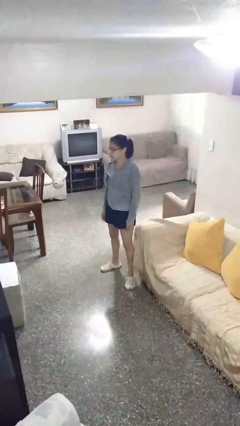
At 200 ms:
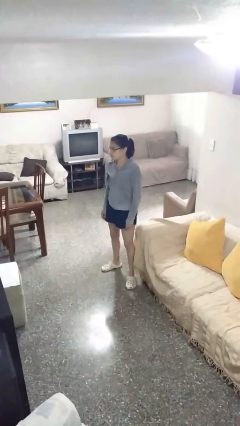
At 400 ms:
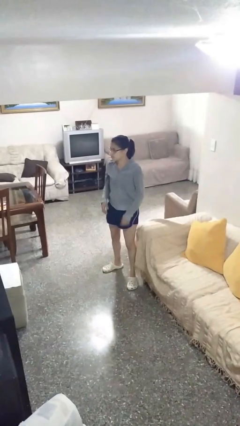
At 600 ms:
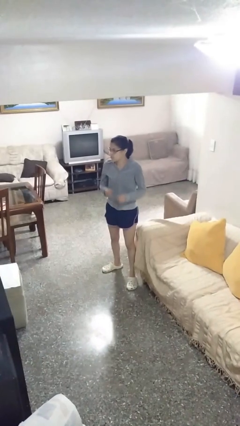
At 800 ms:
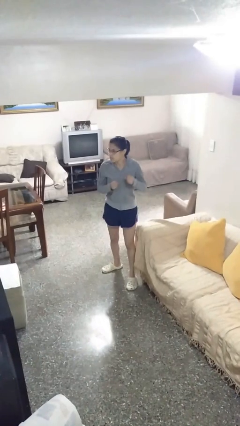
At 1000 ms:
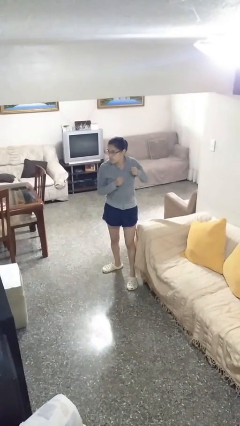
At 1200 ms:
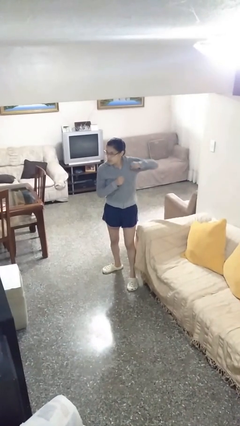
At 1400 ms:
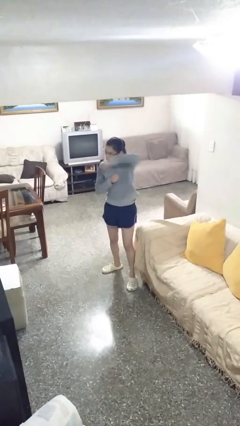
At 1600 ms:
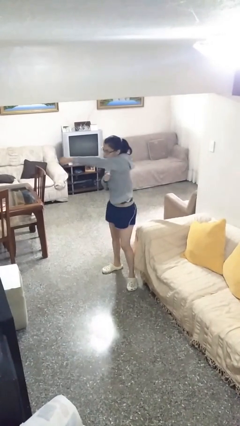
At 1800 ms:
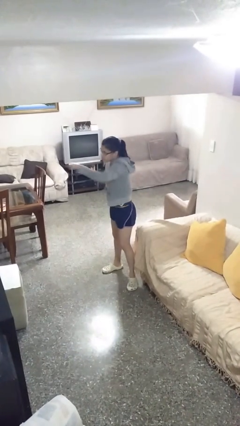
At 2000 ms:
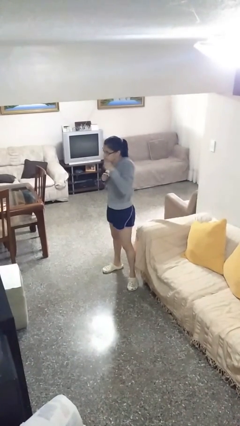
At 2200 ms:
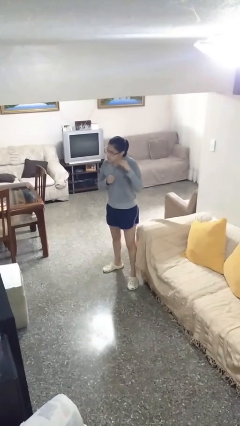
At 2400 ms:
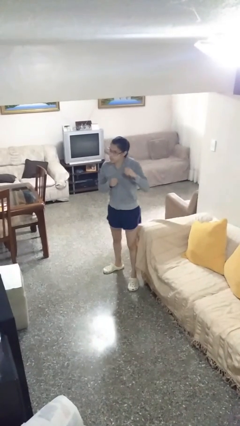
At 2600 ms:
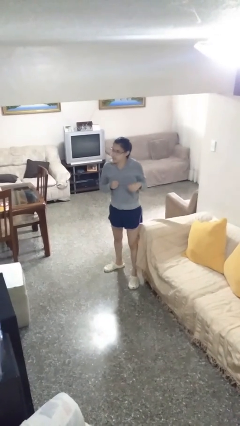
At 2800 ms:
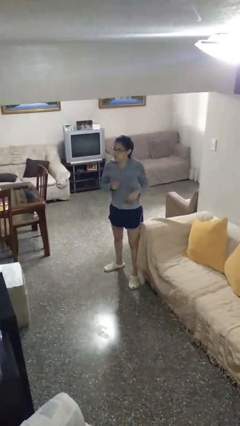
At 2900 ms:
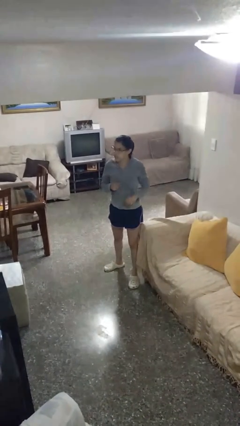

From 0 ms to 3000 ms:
person punches

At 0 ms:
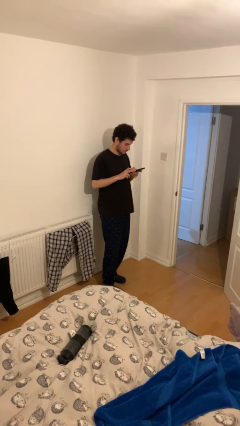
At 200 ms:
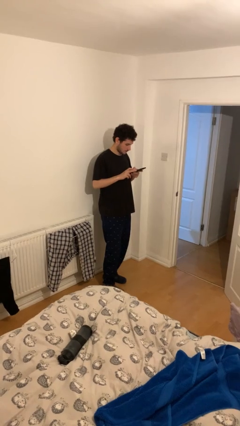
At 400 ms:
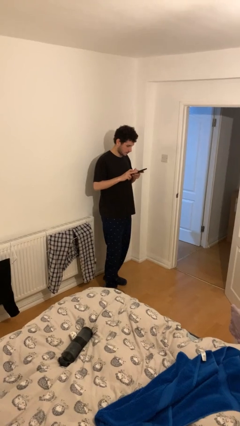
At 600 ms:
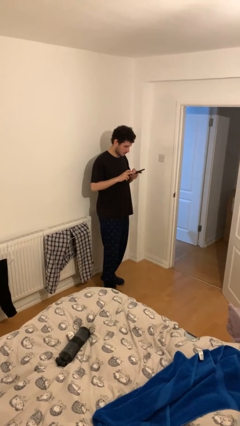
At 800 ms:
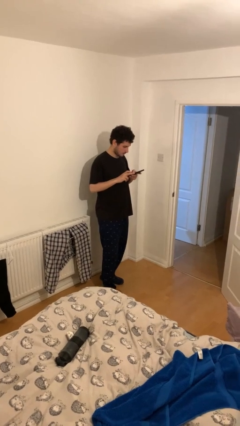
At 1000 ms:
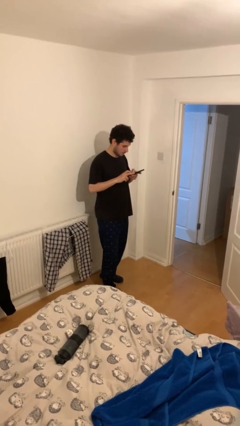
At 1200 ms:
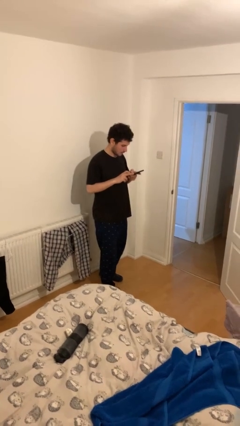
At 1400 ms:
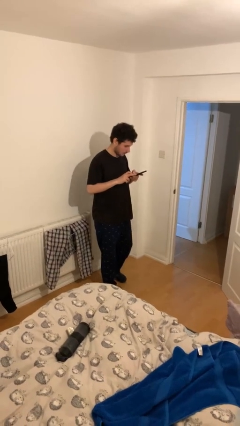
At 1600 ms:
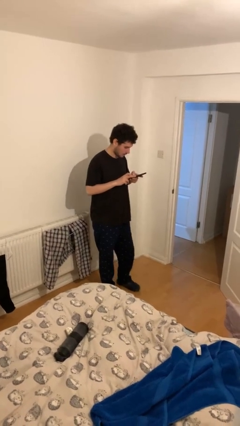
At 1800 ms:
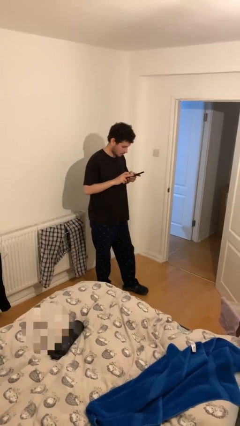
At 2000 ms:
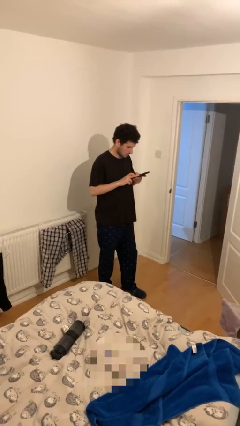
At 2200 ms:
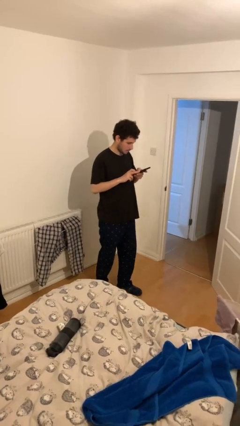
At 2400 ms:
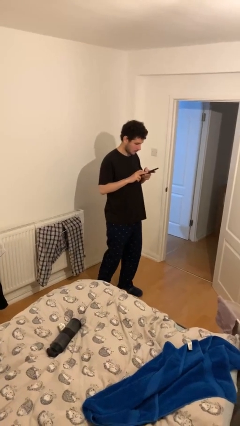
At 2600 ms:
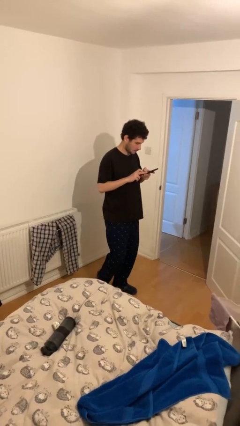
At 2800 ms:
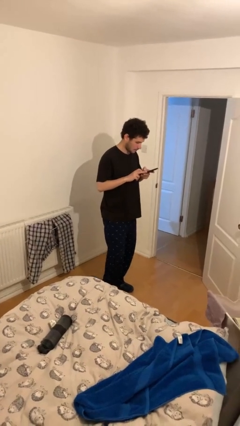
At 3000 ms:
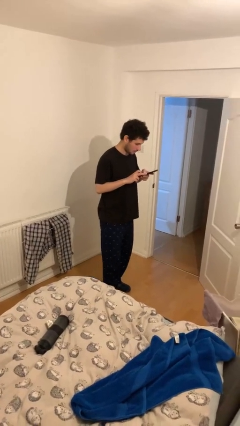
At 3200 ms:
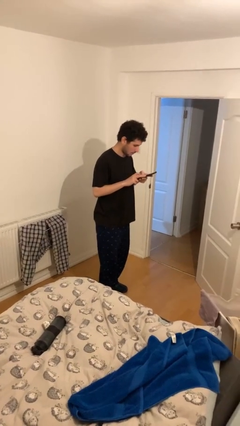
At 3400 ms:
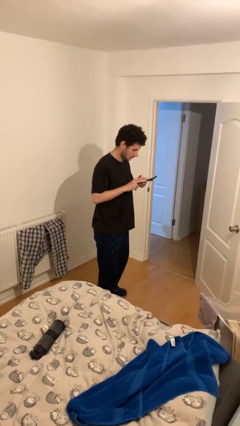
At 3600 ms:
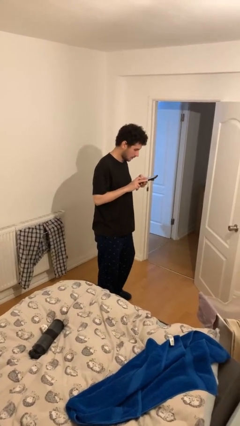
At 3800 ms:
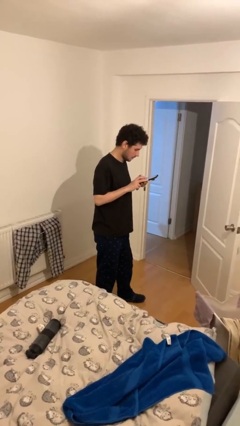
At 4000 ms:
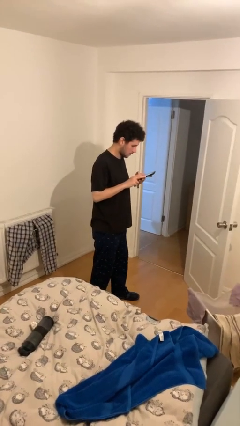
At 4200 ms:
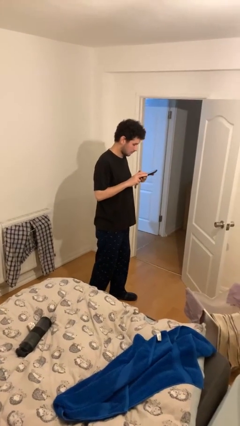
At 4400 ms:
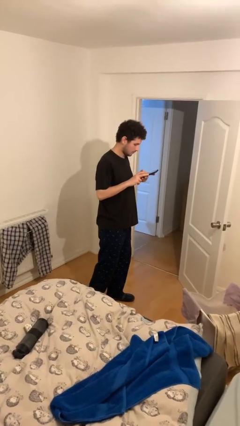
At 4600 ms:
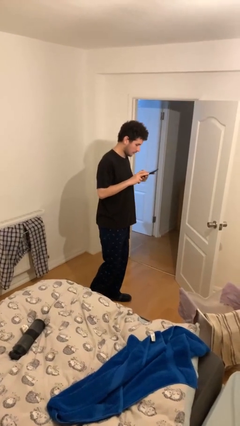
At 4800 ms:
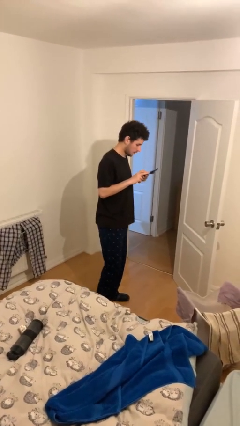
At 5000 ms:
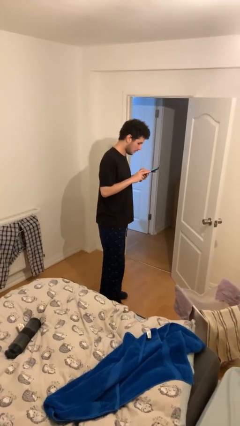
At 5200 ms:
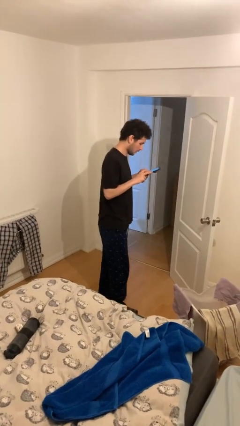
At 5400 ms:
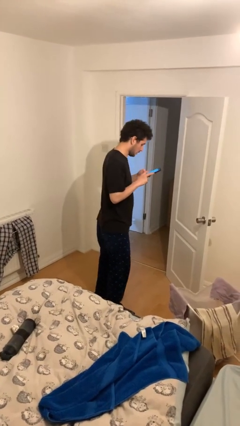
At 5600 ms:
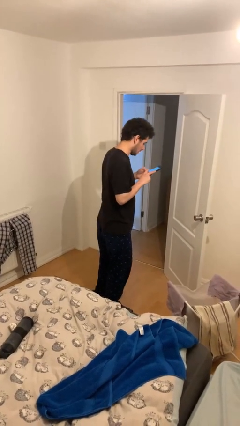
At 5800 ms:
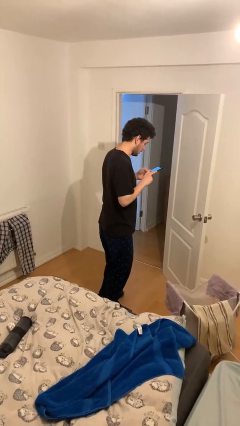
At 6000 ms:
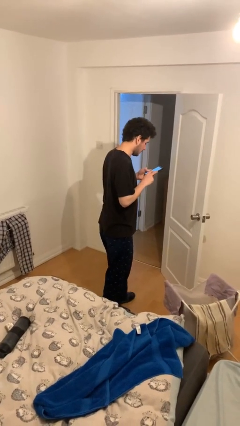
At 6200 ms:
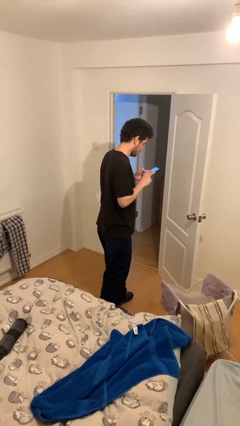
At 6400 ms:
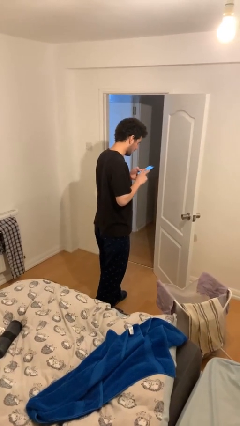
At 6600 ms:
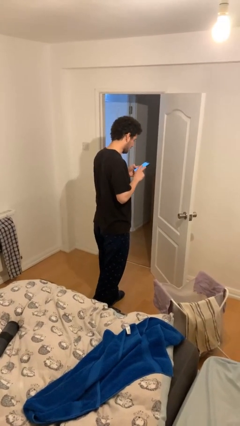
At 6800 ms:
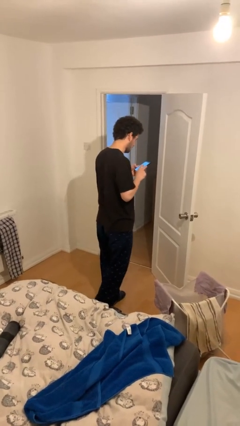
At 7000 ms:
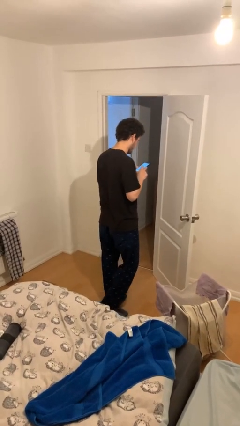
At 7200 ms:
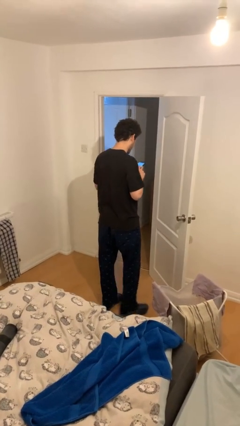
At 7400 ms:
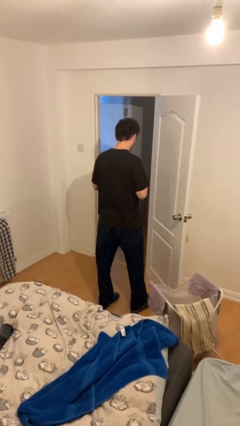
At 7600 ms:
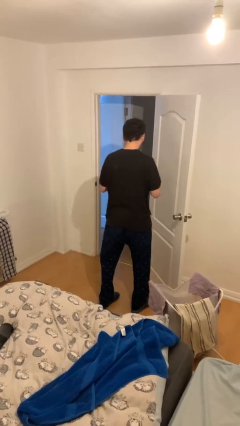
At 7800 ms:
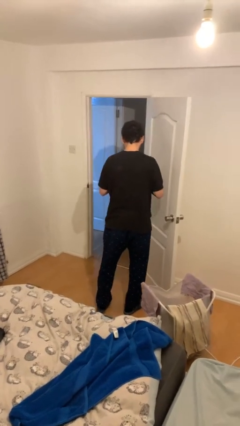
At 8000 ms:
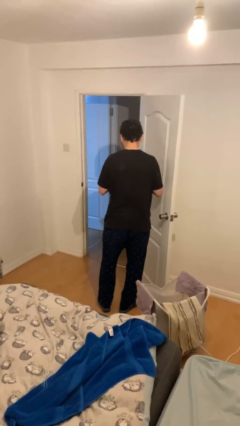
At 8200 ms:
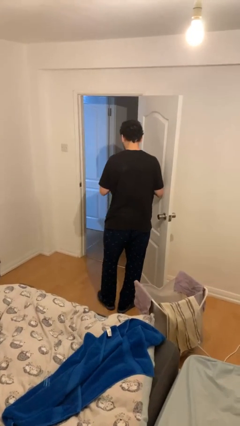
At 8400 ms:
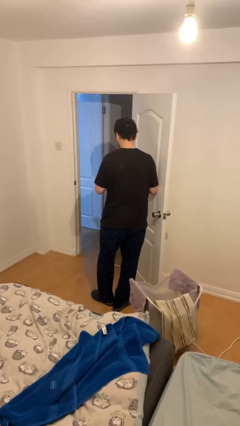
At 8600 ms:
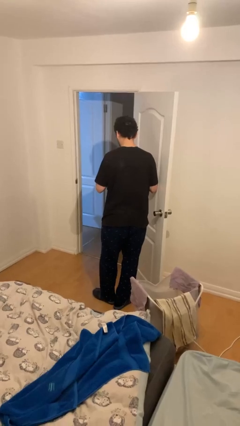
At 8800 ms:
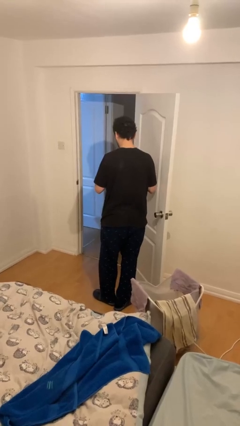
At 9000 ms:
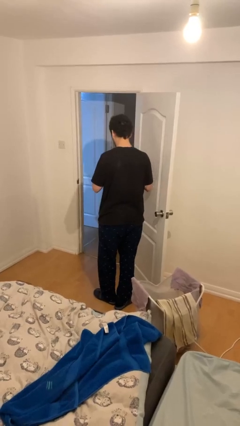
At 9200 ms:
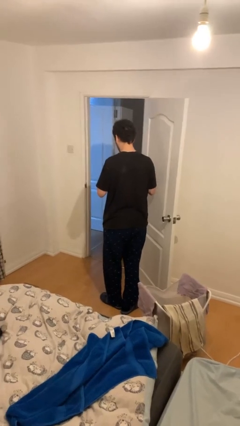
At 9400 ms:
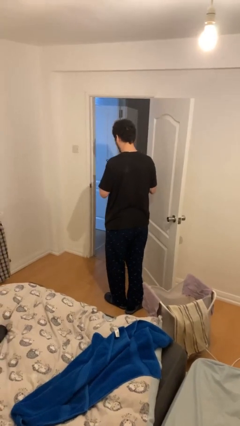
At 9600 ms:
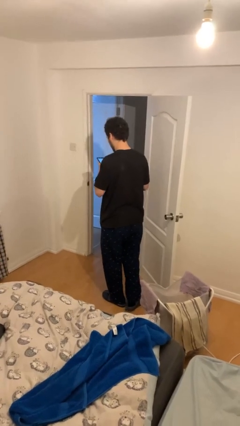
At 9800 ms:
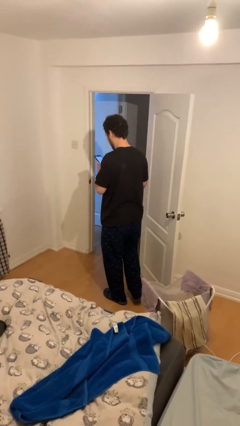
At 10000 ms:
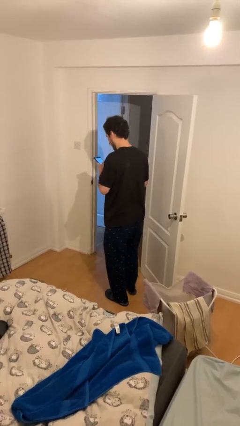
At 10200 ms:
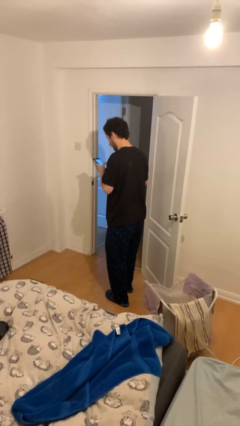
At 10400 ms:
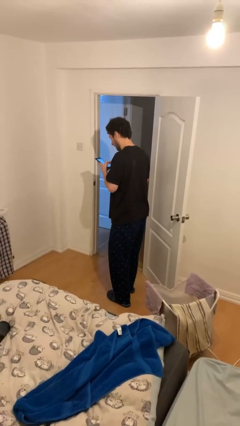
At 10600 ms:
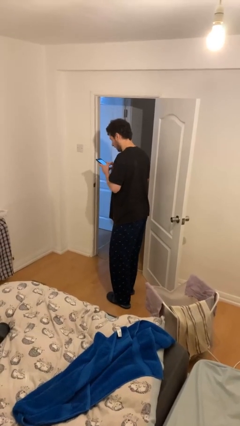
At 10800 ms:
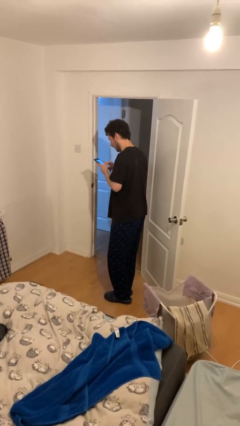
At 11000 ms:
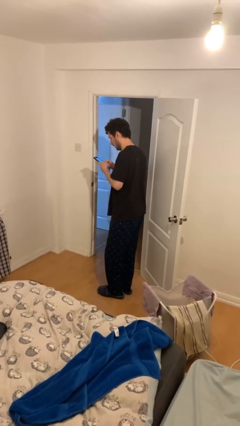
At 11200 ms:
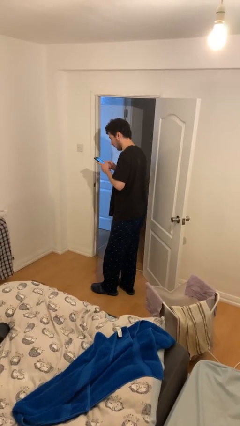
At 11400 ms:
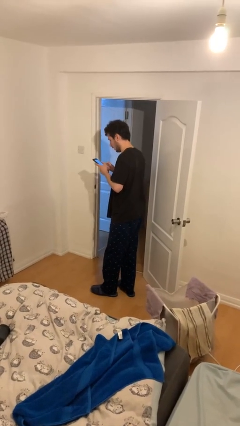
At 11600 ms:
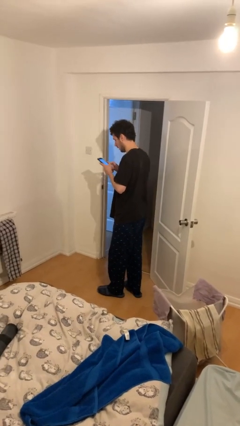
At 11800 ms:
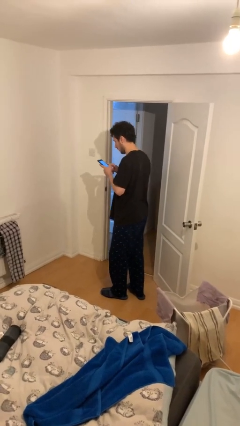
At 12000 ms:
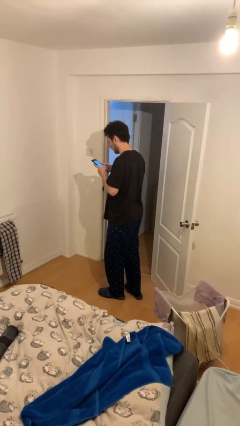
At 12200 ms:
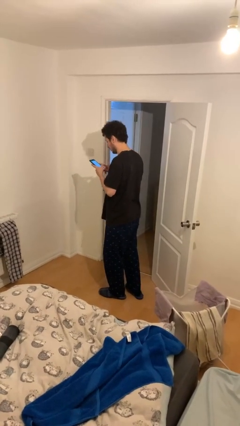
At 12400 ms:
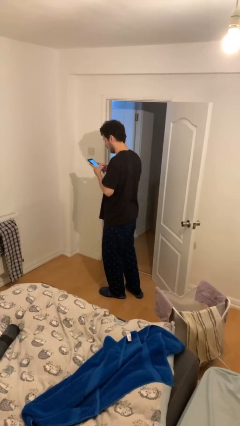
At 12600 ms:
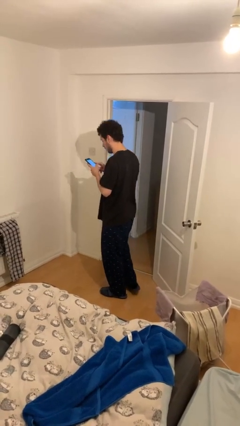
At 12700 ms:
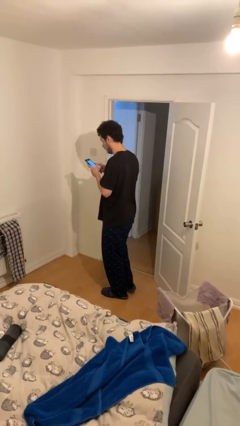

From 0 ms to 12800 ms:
person texts on phone

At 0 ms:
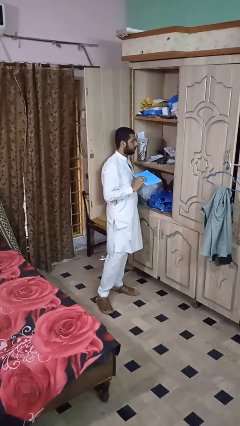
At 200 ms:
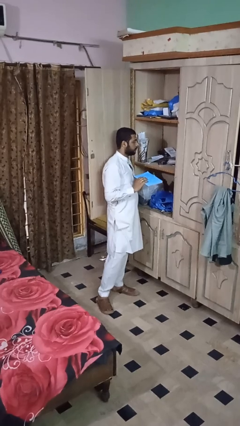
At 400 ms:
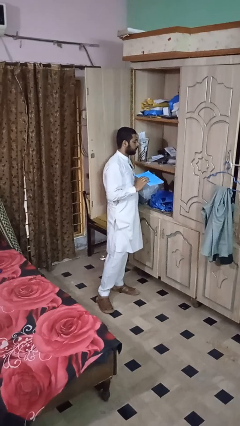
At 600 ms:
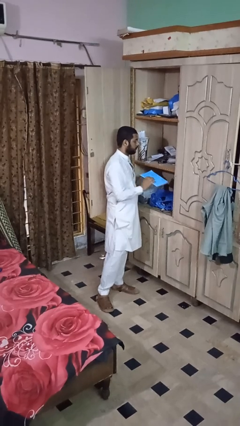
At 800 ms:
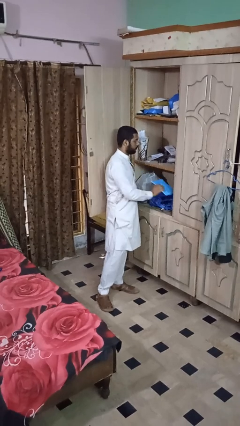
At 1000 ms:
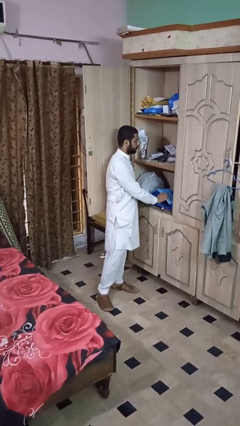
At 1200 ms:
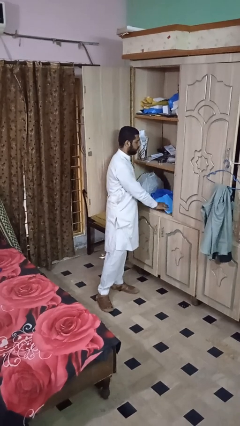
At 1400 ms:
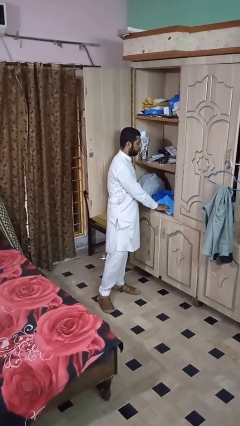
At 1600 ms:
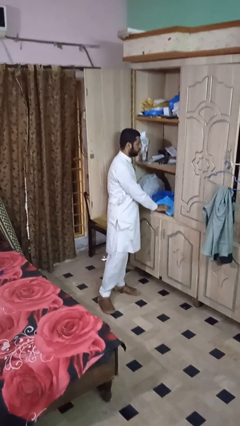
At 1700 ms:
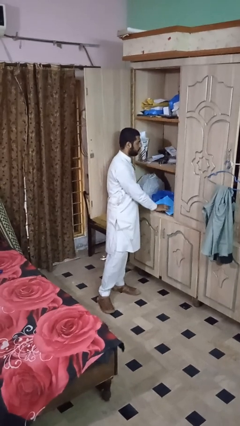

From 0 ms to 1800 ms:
person puts down object on shelf

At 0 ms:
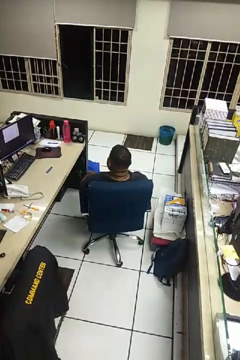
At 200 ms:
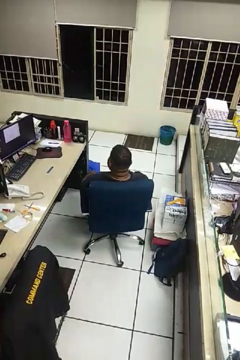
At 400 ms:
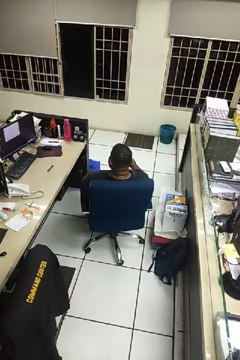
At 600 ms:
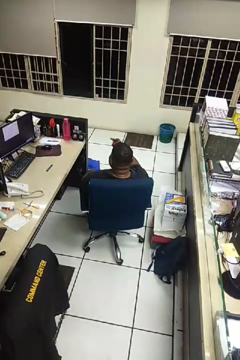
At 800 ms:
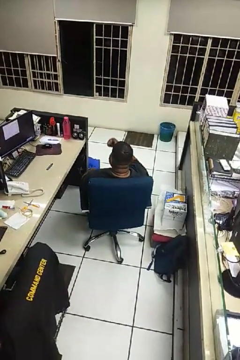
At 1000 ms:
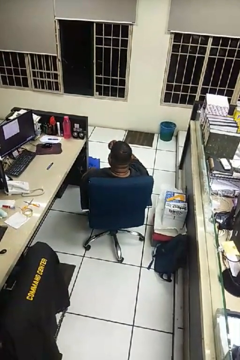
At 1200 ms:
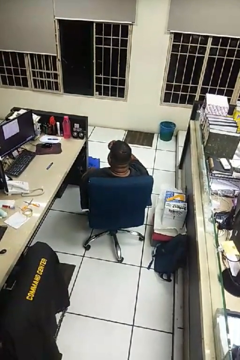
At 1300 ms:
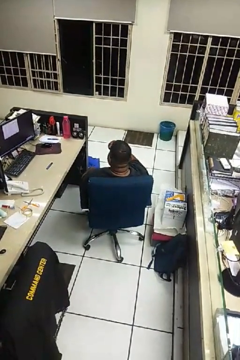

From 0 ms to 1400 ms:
person gestures watch closely
